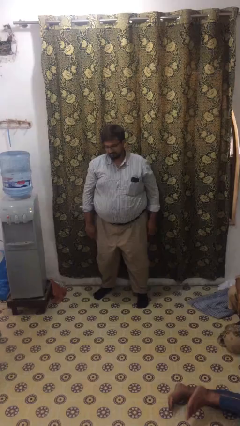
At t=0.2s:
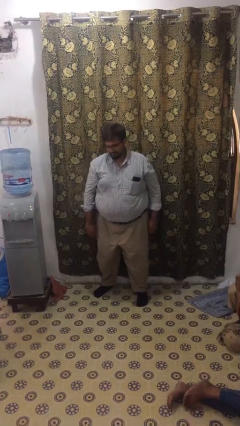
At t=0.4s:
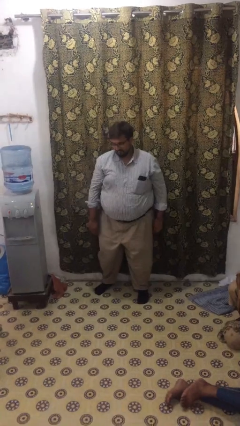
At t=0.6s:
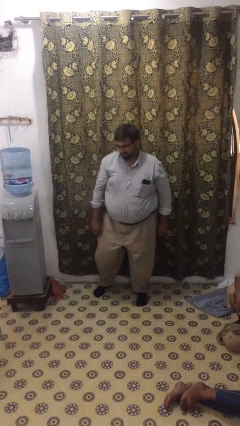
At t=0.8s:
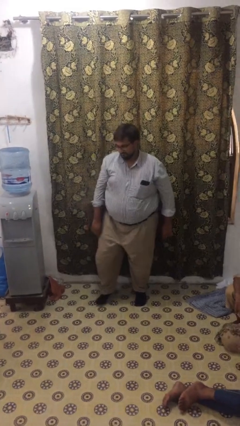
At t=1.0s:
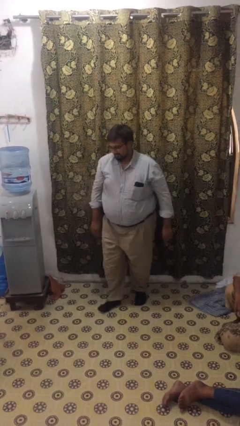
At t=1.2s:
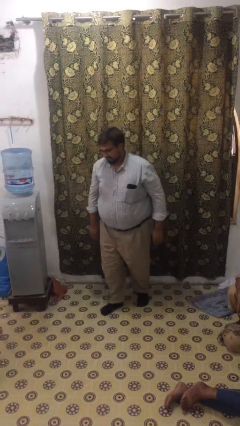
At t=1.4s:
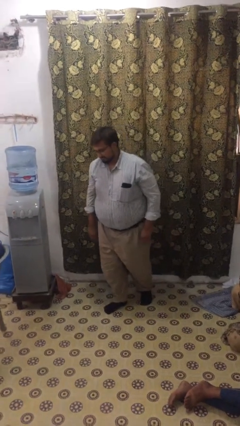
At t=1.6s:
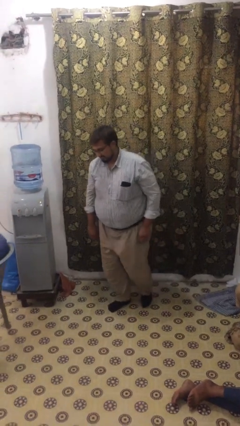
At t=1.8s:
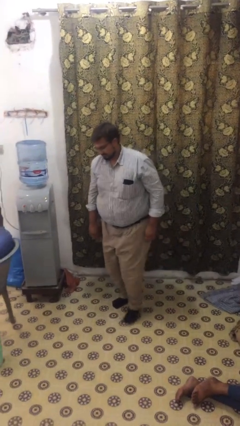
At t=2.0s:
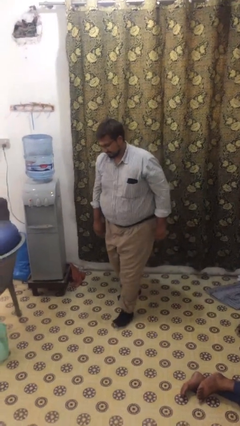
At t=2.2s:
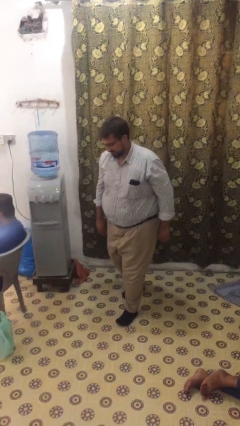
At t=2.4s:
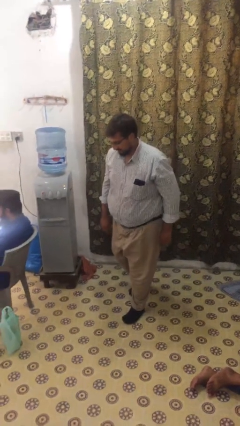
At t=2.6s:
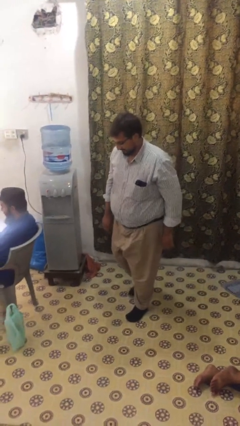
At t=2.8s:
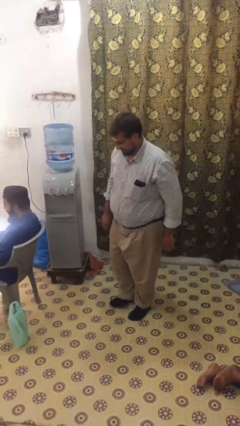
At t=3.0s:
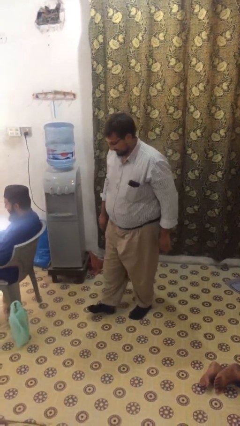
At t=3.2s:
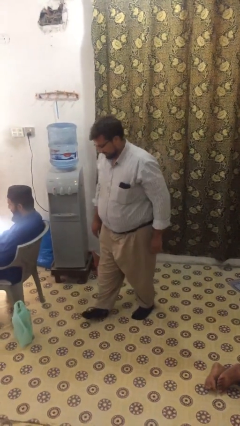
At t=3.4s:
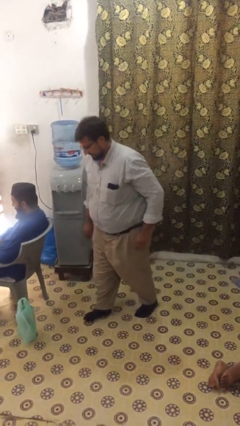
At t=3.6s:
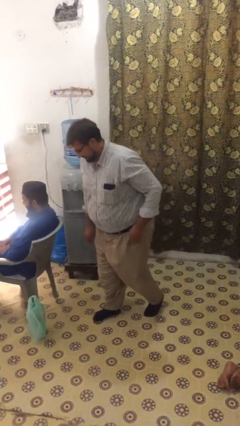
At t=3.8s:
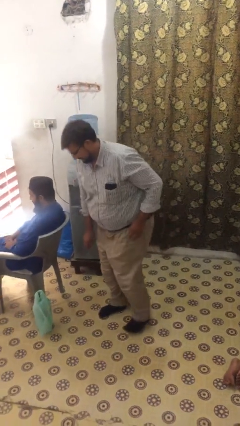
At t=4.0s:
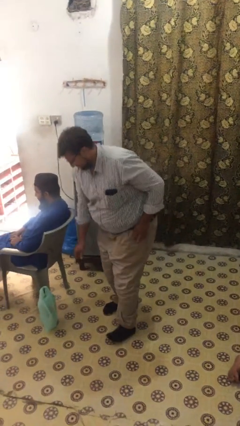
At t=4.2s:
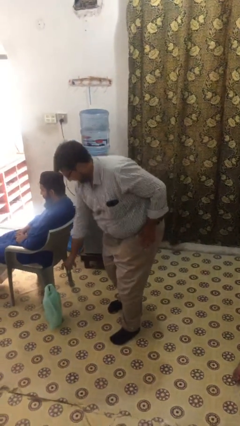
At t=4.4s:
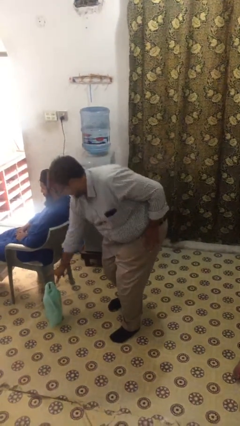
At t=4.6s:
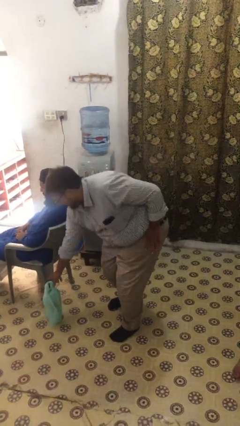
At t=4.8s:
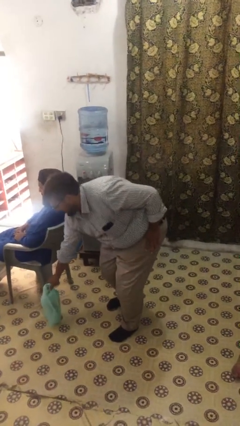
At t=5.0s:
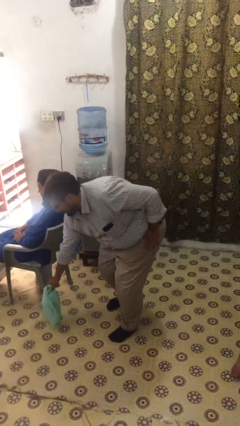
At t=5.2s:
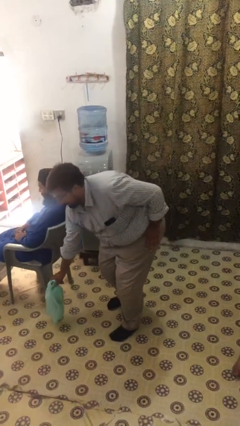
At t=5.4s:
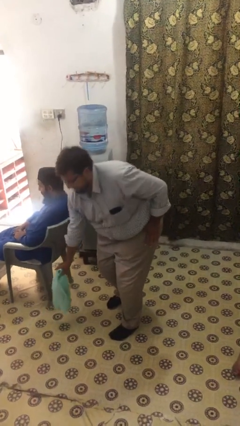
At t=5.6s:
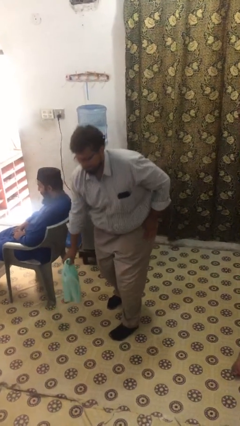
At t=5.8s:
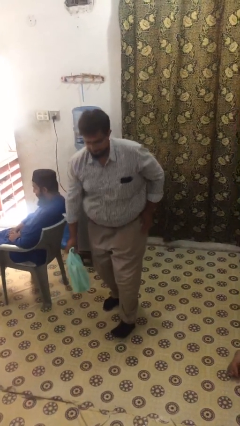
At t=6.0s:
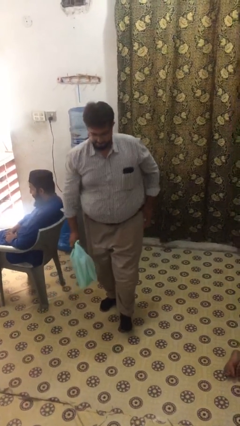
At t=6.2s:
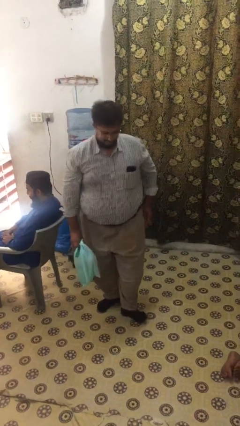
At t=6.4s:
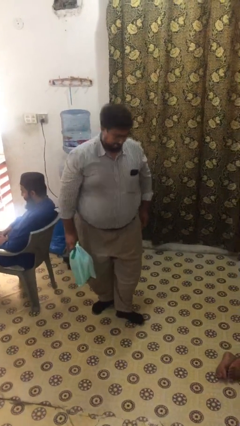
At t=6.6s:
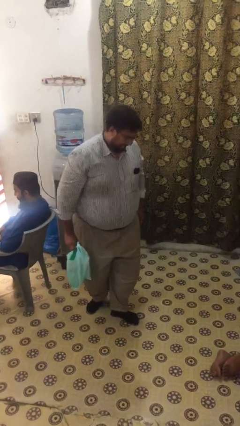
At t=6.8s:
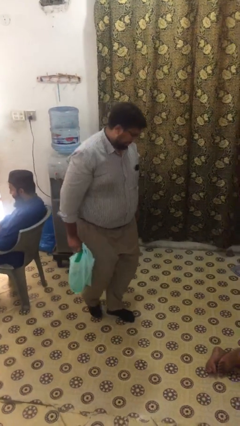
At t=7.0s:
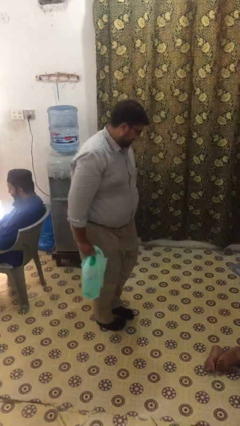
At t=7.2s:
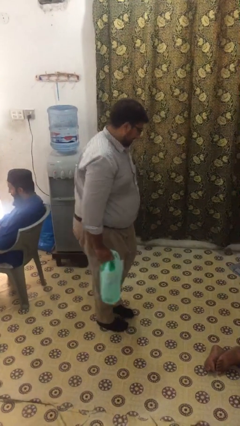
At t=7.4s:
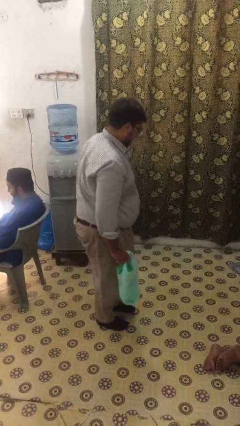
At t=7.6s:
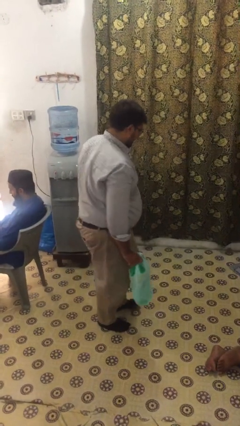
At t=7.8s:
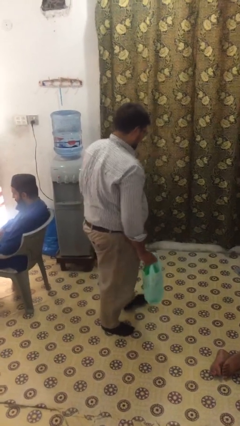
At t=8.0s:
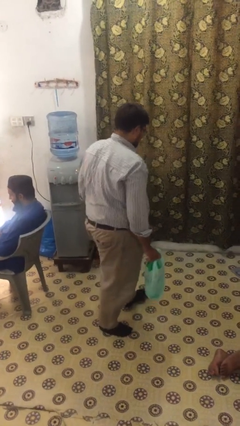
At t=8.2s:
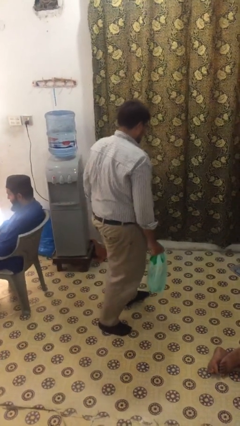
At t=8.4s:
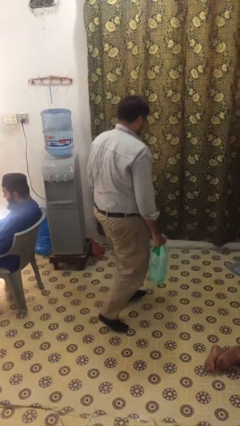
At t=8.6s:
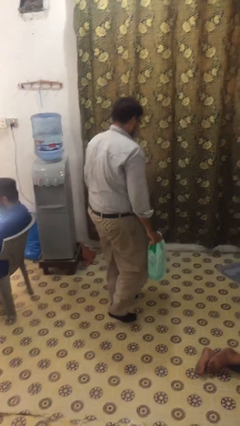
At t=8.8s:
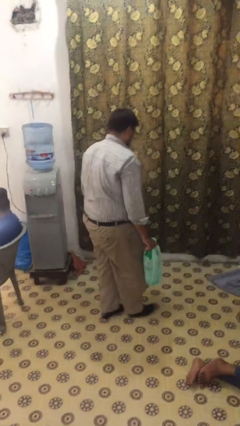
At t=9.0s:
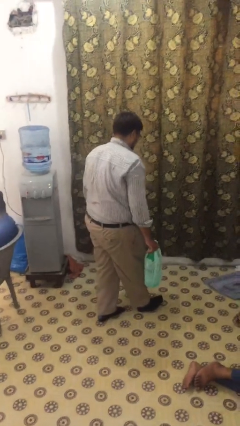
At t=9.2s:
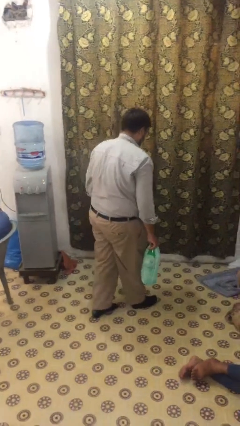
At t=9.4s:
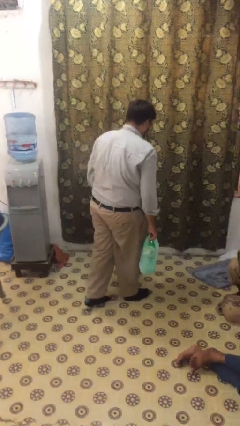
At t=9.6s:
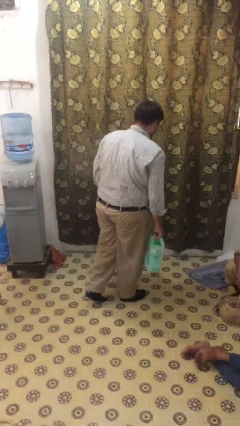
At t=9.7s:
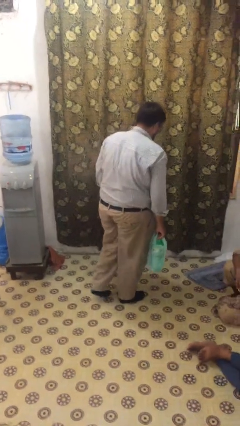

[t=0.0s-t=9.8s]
person steals object from person

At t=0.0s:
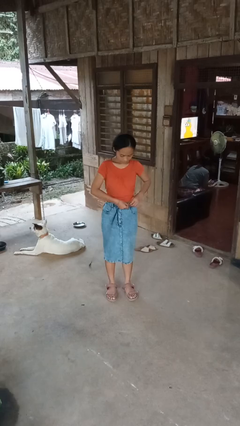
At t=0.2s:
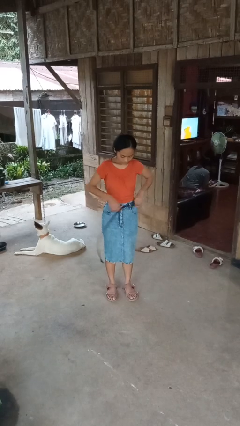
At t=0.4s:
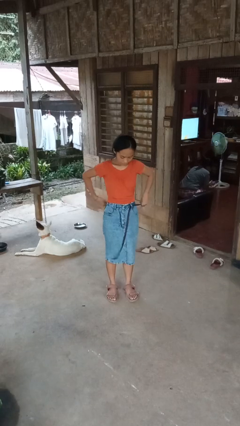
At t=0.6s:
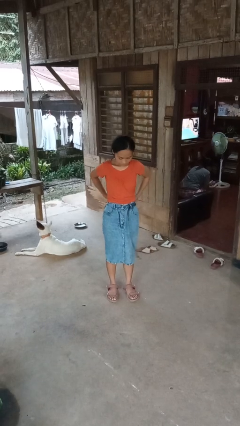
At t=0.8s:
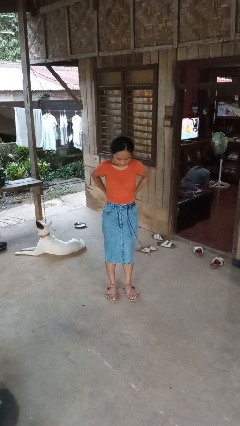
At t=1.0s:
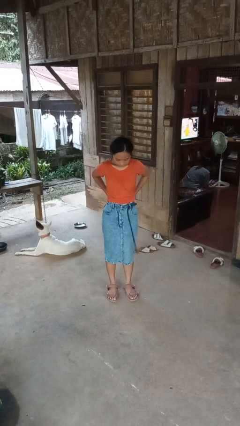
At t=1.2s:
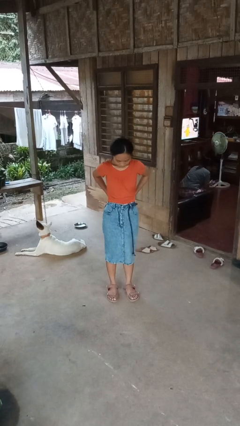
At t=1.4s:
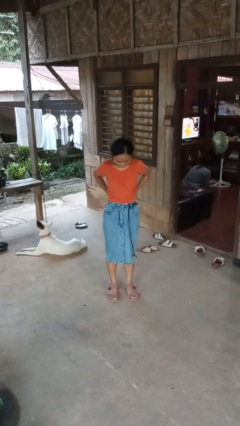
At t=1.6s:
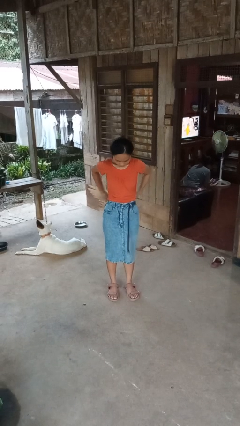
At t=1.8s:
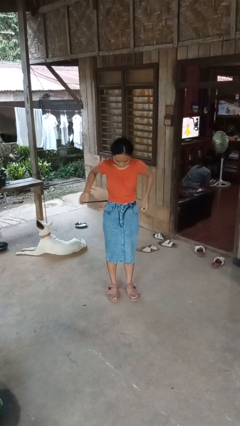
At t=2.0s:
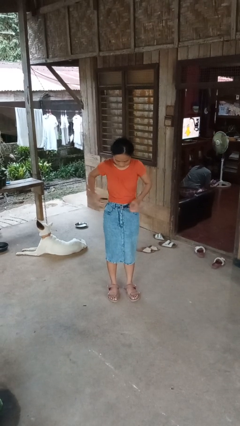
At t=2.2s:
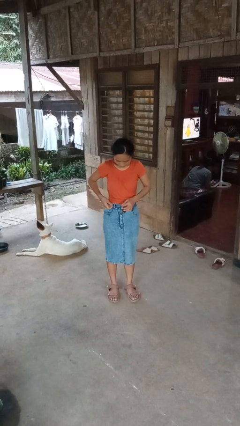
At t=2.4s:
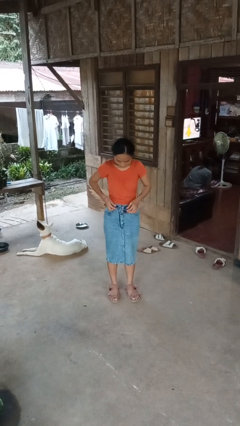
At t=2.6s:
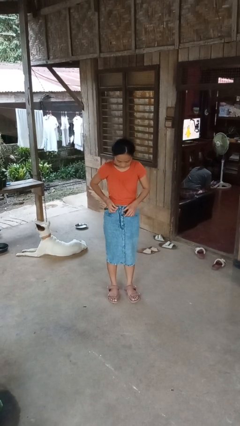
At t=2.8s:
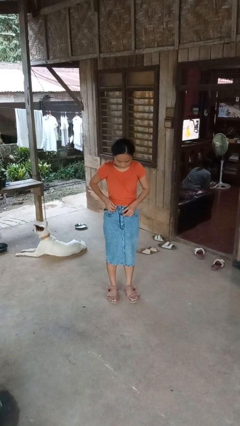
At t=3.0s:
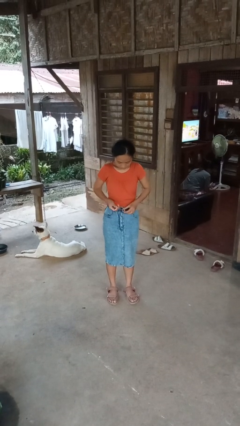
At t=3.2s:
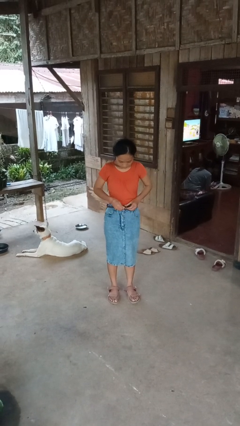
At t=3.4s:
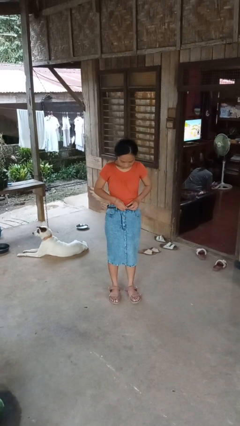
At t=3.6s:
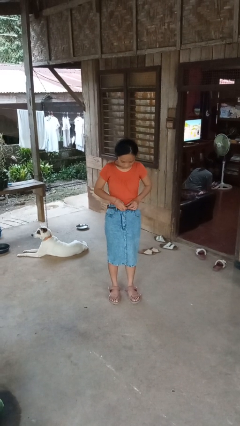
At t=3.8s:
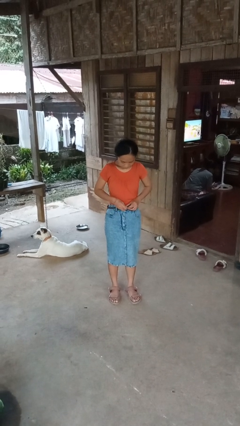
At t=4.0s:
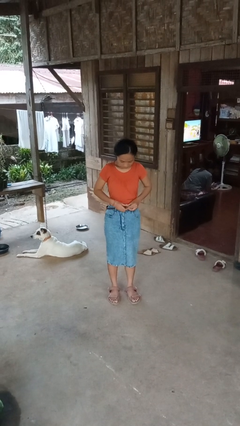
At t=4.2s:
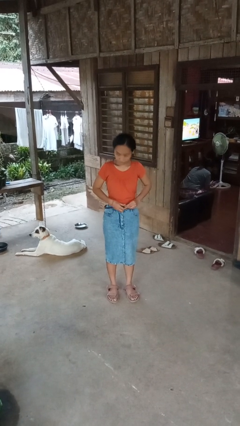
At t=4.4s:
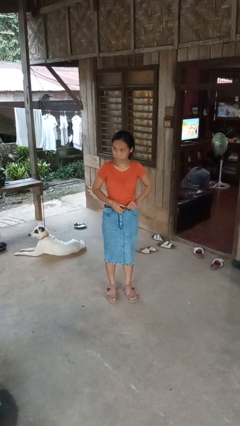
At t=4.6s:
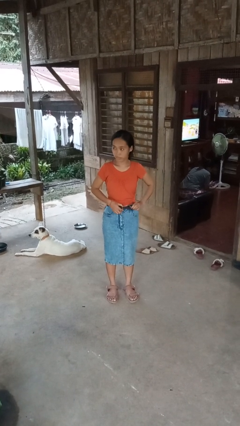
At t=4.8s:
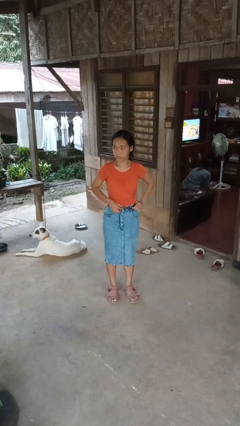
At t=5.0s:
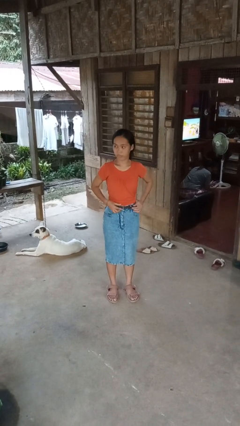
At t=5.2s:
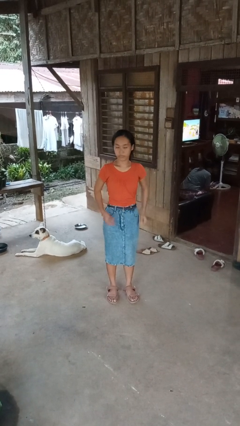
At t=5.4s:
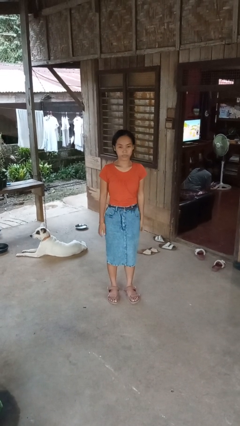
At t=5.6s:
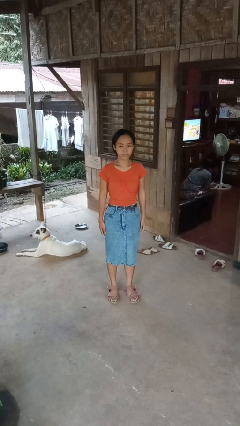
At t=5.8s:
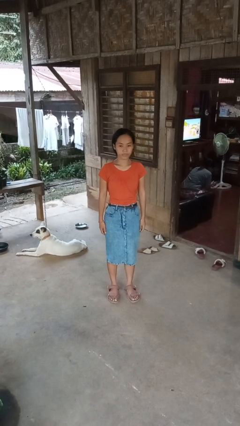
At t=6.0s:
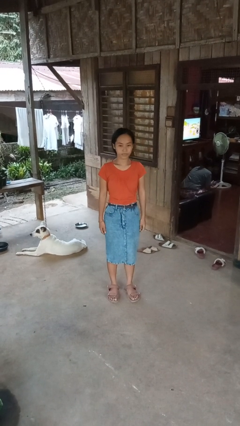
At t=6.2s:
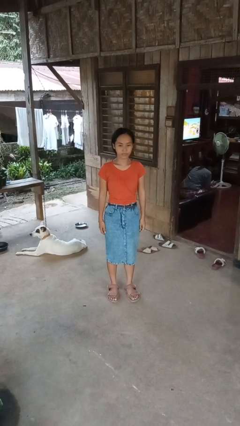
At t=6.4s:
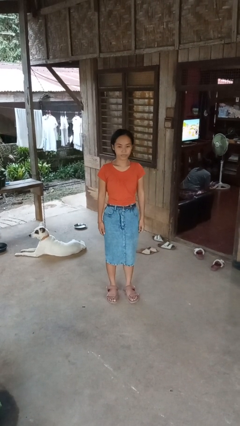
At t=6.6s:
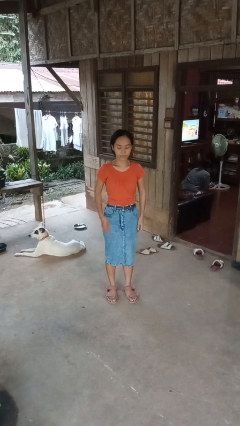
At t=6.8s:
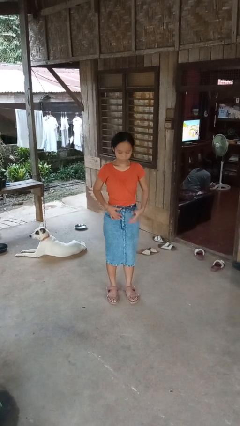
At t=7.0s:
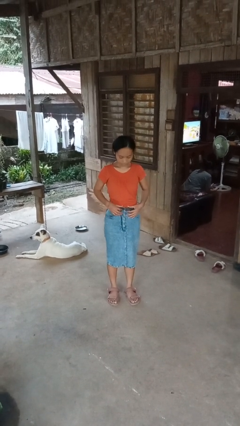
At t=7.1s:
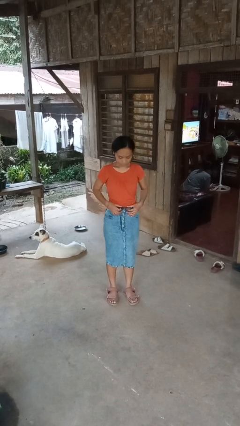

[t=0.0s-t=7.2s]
person puts on belt

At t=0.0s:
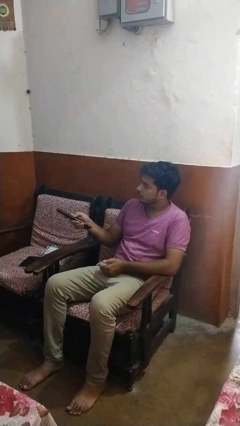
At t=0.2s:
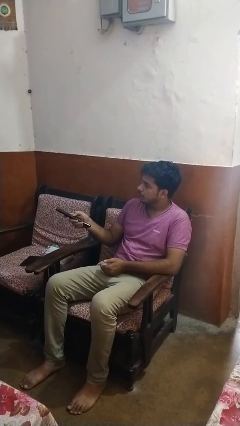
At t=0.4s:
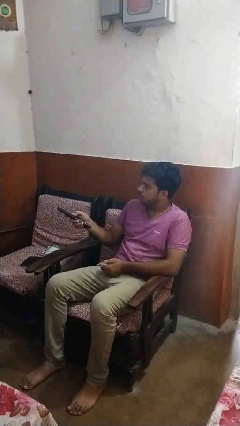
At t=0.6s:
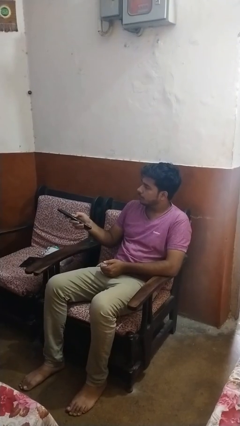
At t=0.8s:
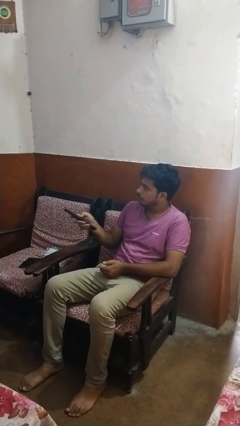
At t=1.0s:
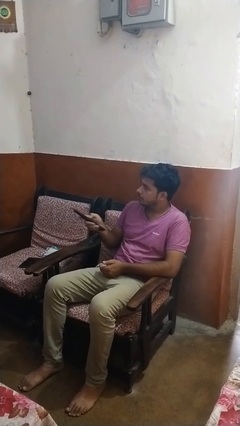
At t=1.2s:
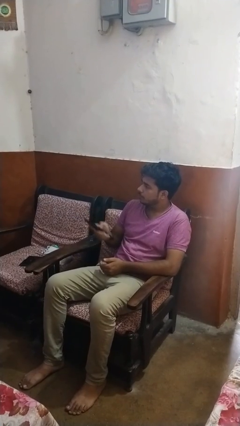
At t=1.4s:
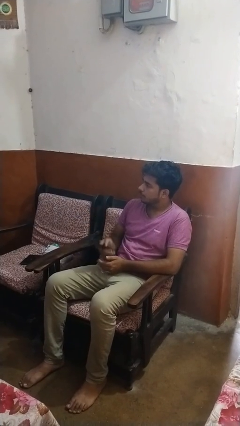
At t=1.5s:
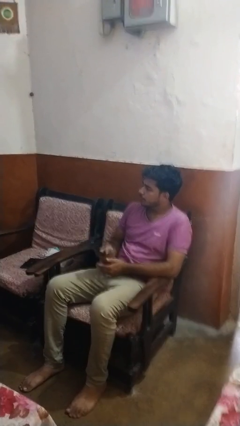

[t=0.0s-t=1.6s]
person uses television remote
